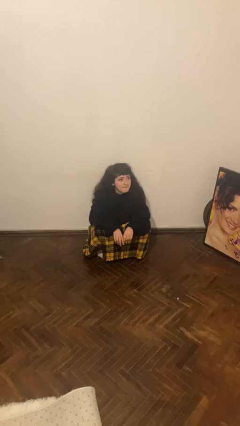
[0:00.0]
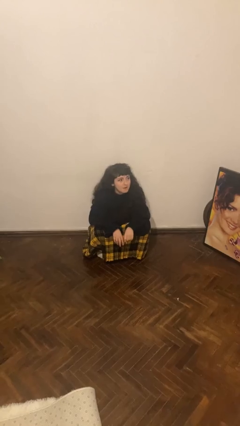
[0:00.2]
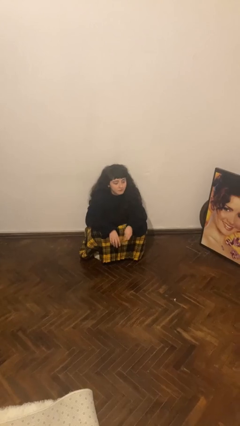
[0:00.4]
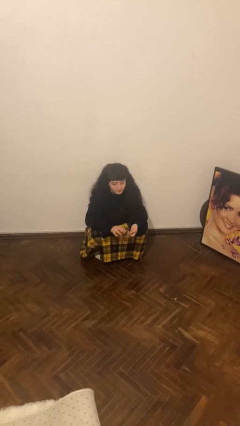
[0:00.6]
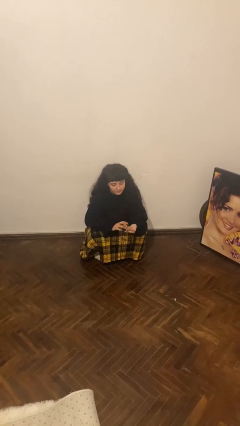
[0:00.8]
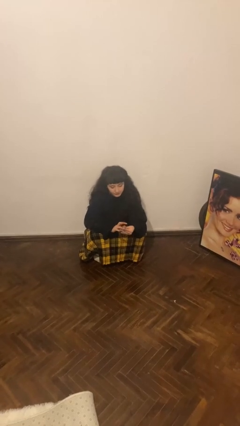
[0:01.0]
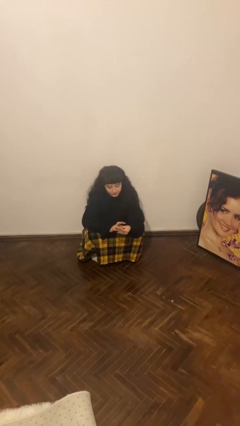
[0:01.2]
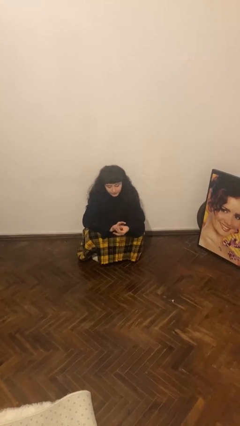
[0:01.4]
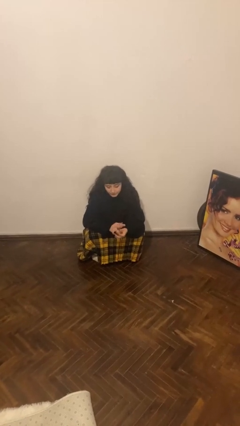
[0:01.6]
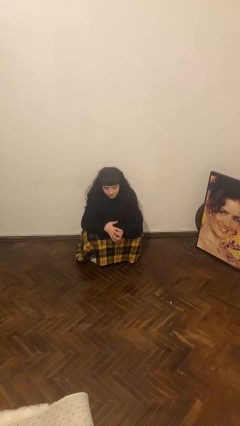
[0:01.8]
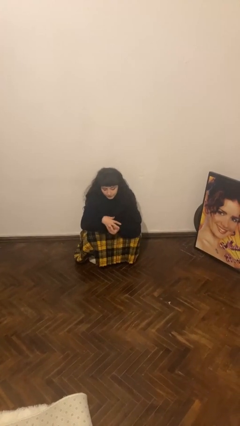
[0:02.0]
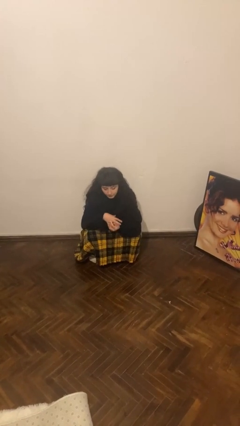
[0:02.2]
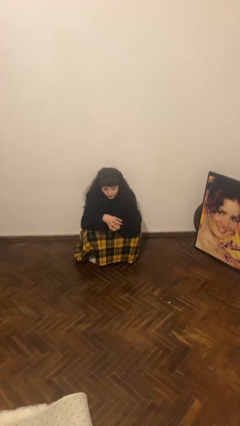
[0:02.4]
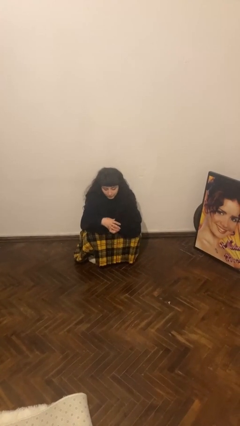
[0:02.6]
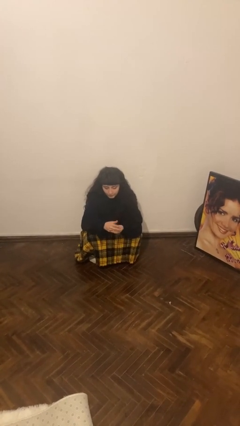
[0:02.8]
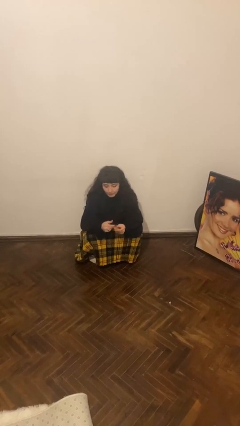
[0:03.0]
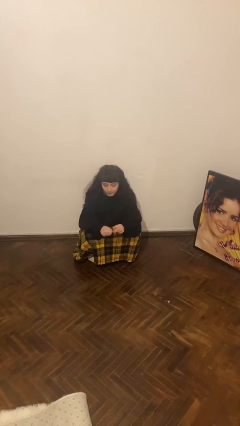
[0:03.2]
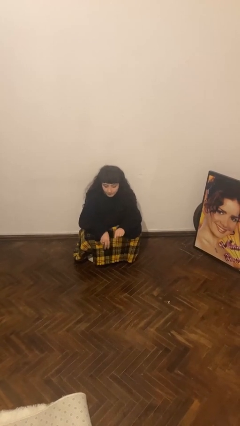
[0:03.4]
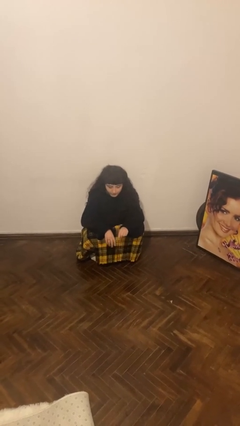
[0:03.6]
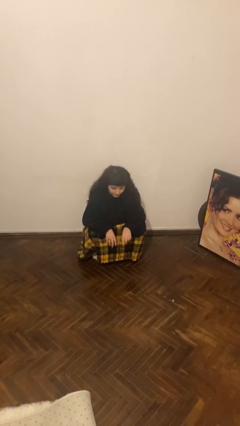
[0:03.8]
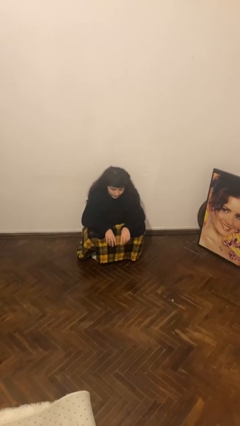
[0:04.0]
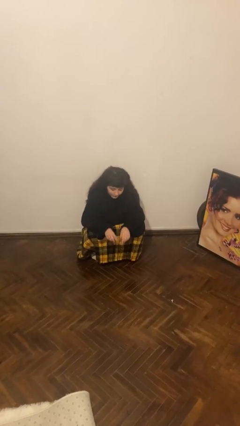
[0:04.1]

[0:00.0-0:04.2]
person puts on ring

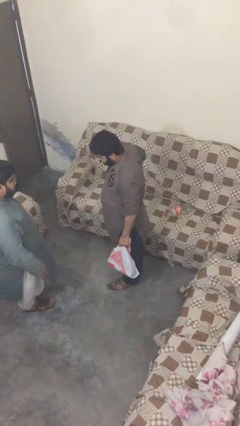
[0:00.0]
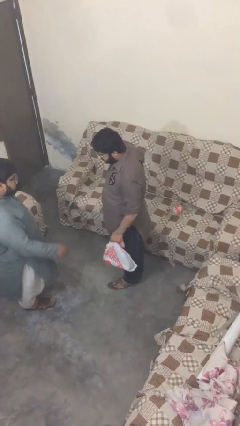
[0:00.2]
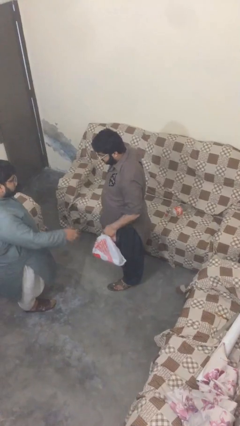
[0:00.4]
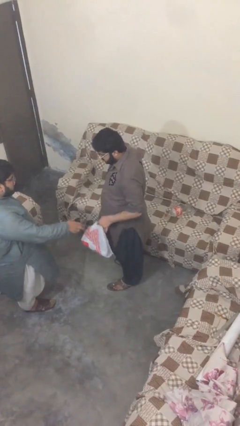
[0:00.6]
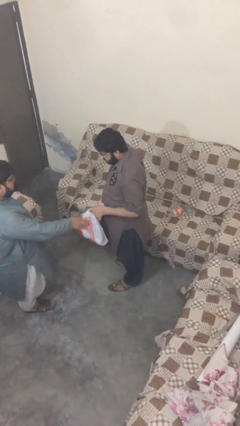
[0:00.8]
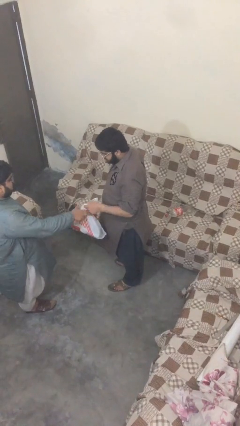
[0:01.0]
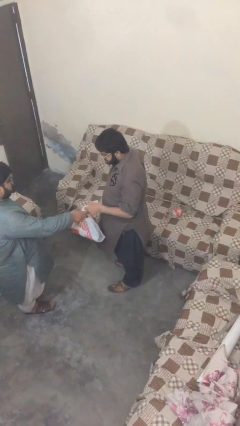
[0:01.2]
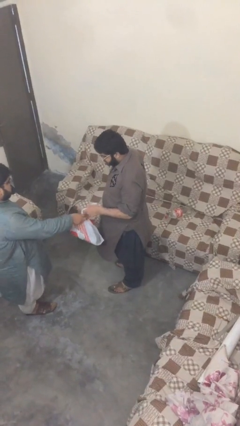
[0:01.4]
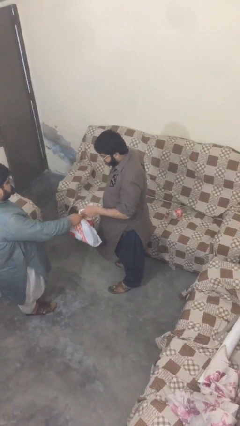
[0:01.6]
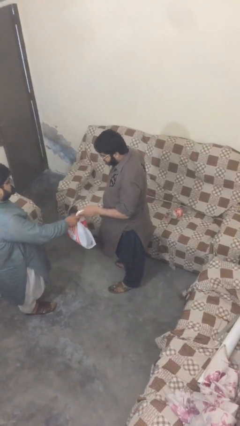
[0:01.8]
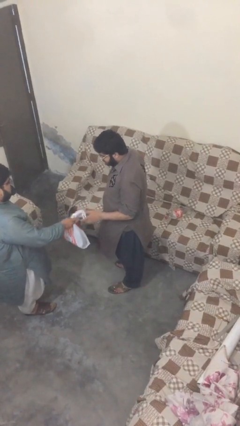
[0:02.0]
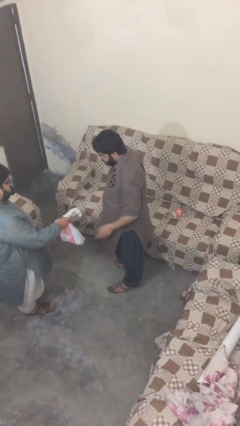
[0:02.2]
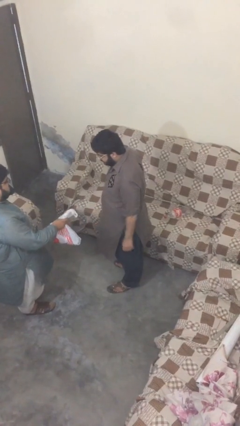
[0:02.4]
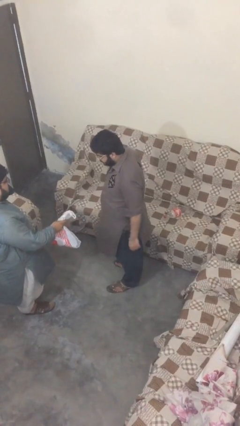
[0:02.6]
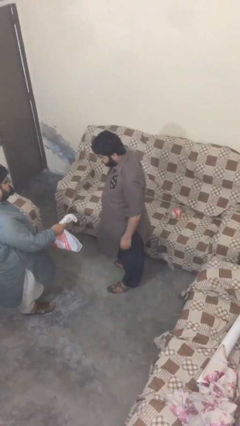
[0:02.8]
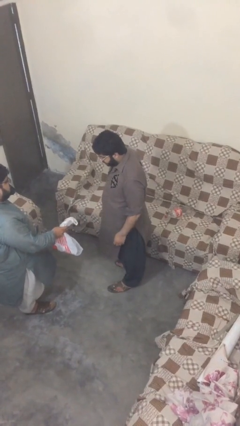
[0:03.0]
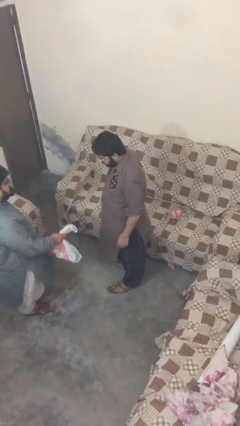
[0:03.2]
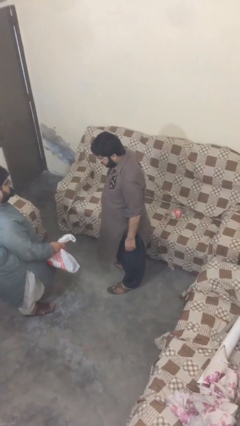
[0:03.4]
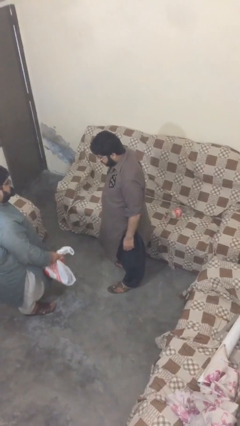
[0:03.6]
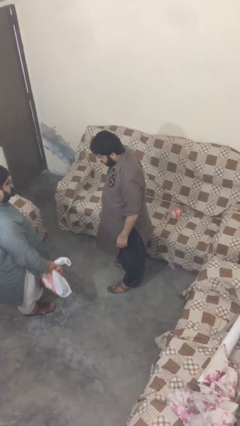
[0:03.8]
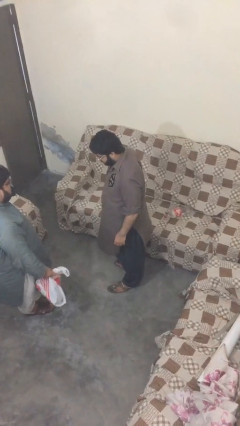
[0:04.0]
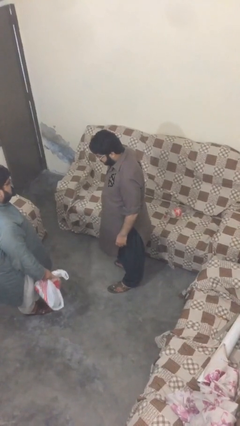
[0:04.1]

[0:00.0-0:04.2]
person transfers object to person

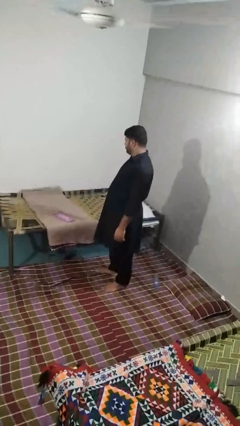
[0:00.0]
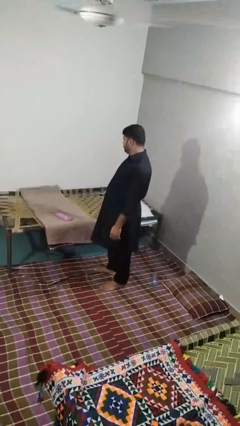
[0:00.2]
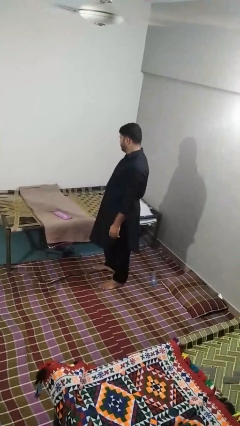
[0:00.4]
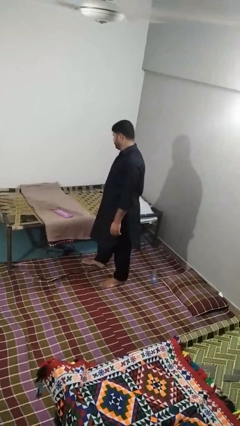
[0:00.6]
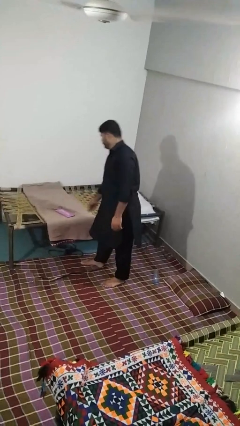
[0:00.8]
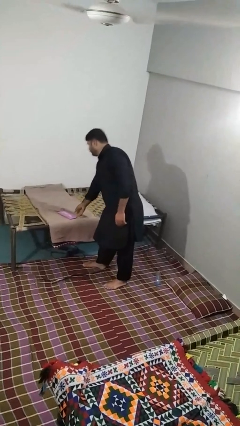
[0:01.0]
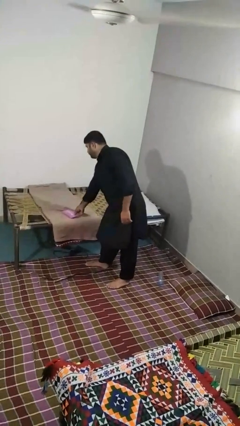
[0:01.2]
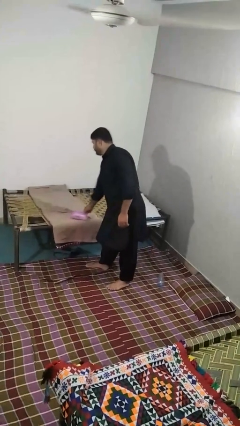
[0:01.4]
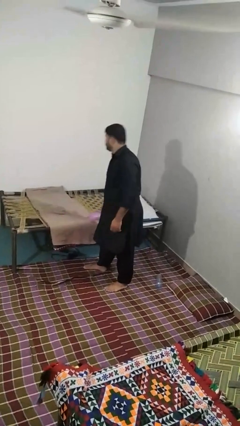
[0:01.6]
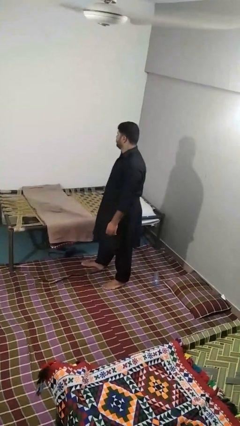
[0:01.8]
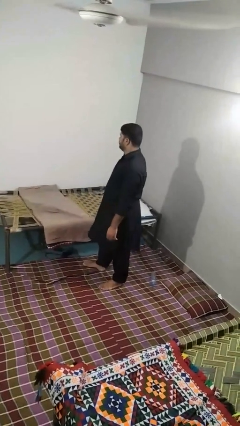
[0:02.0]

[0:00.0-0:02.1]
person picks up object from bed

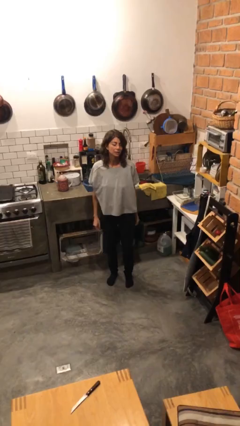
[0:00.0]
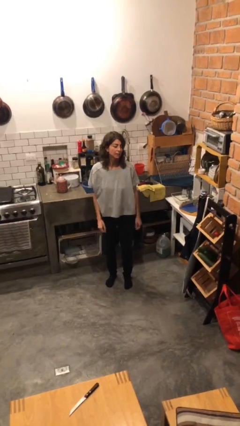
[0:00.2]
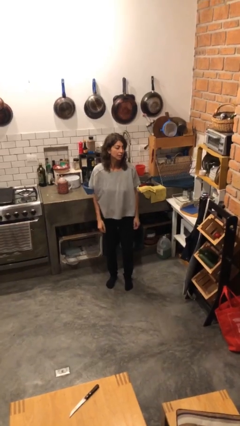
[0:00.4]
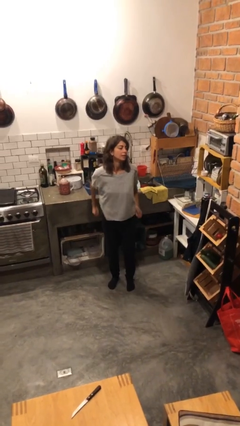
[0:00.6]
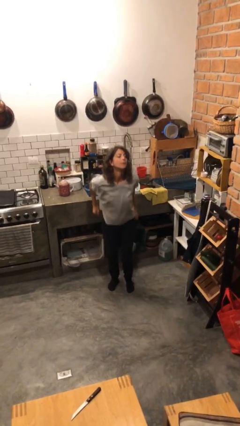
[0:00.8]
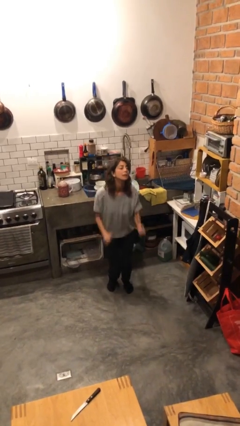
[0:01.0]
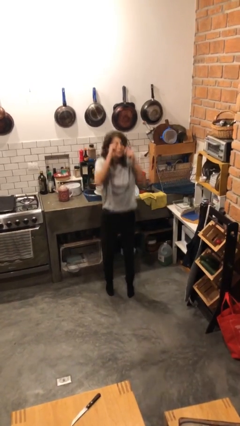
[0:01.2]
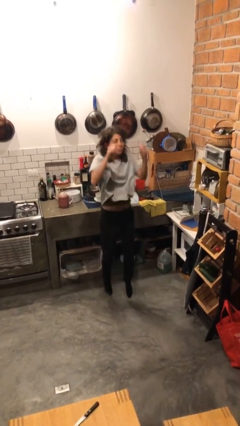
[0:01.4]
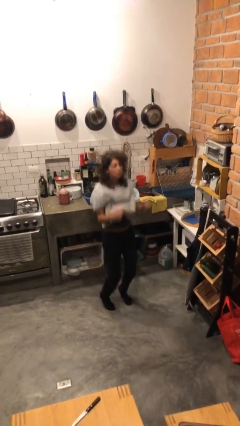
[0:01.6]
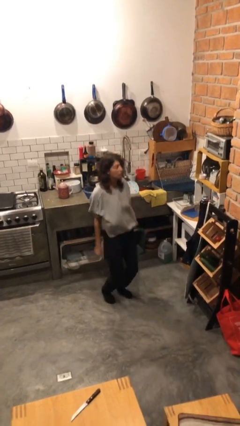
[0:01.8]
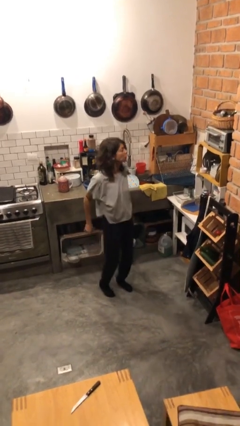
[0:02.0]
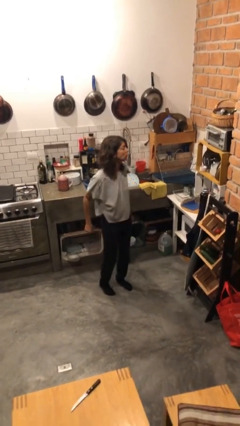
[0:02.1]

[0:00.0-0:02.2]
person jumps

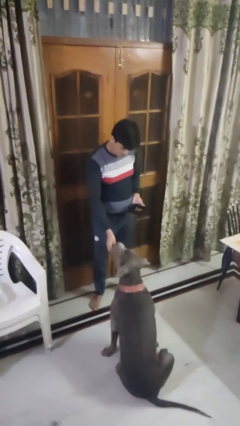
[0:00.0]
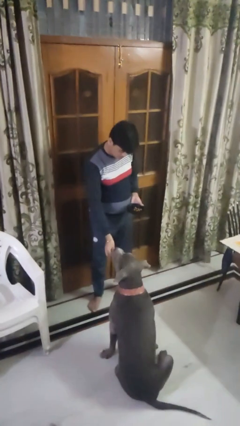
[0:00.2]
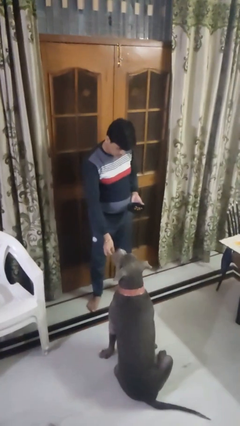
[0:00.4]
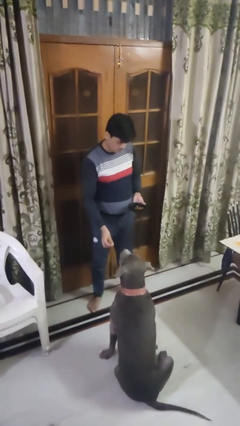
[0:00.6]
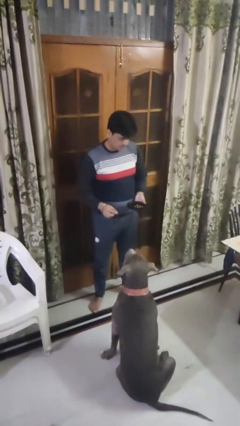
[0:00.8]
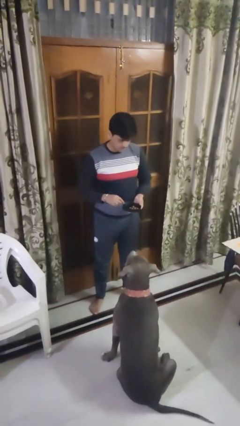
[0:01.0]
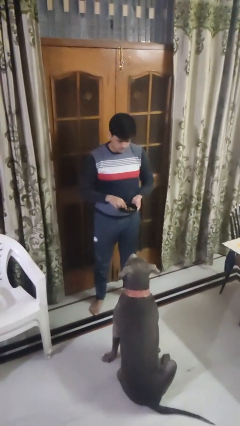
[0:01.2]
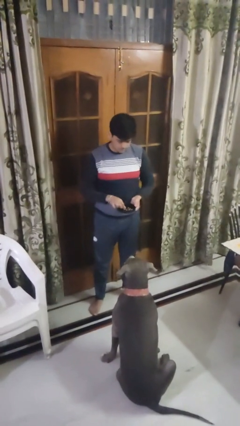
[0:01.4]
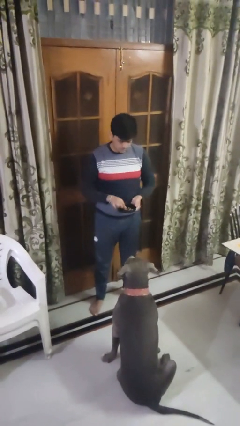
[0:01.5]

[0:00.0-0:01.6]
person feeds dog

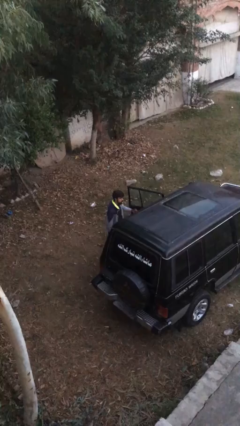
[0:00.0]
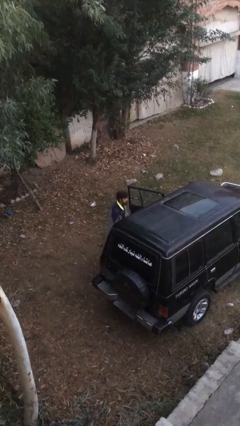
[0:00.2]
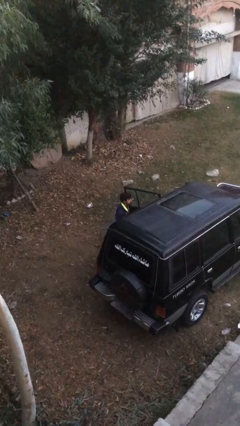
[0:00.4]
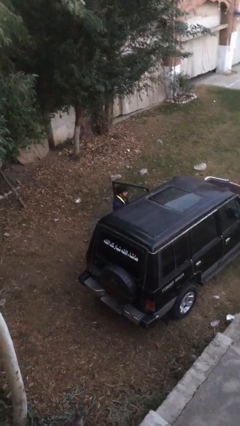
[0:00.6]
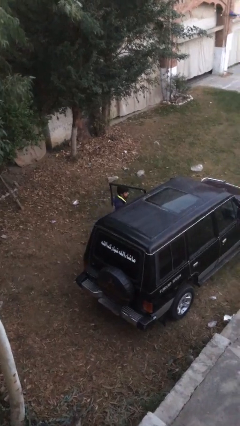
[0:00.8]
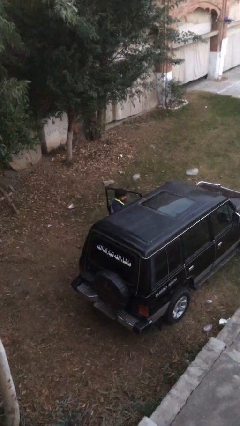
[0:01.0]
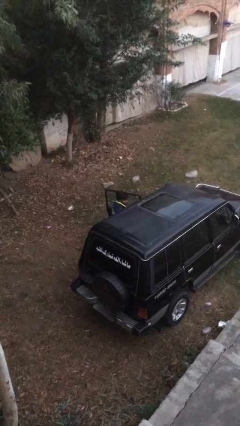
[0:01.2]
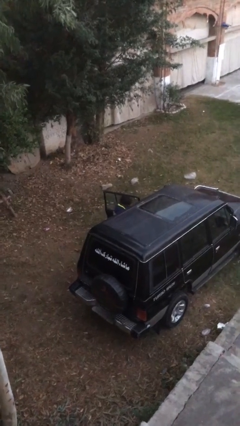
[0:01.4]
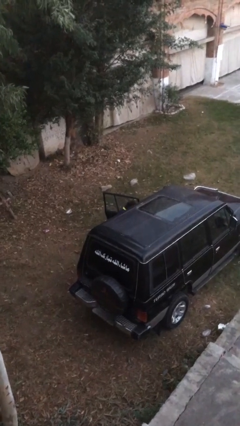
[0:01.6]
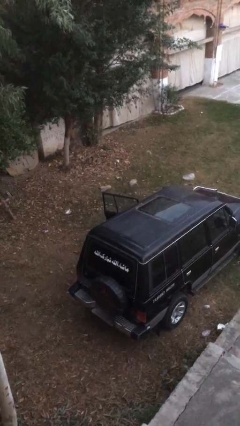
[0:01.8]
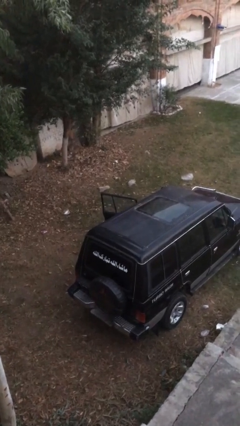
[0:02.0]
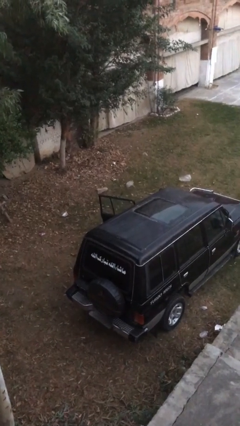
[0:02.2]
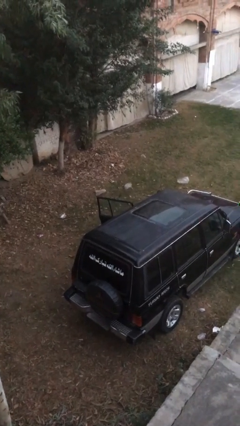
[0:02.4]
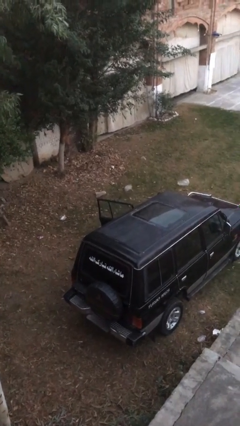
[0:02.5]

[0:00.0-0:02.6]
person enters car

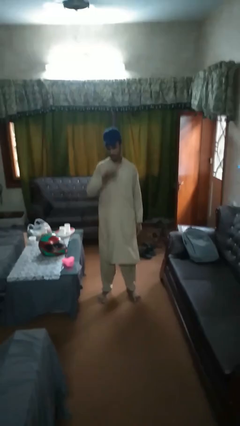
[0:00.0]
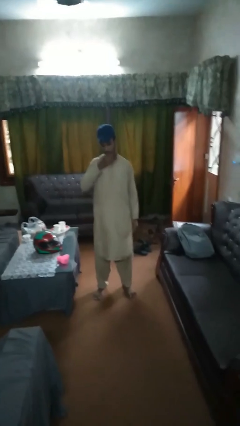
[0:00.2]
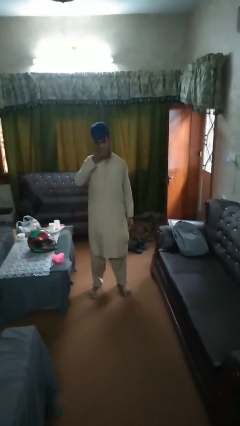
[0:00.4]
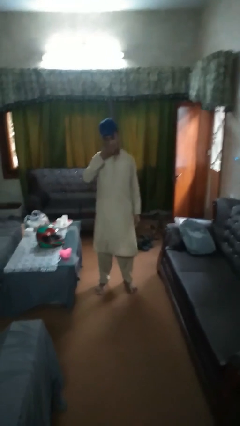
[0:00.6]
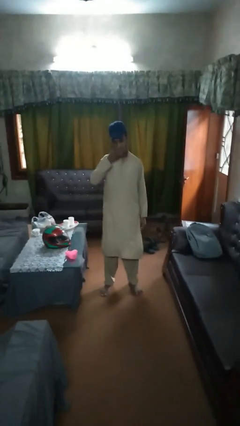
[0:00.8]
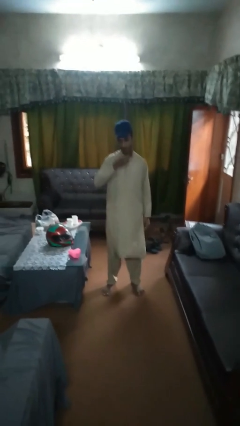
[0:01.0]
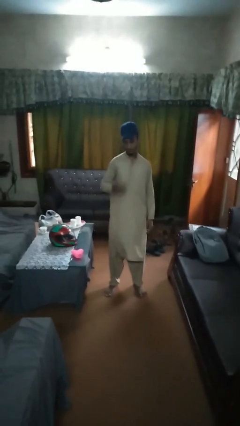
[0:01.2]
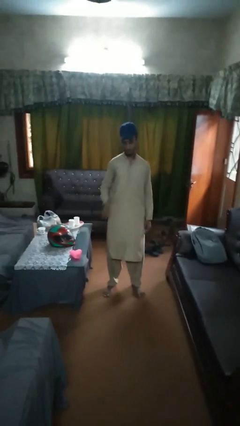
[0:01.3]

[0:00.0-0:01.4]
person eats banana
